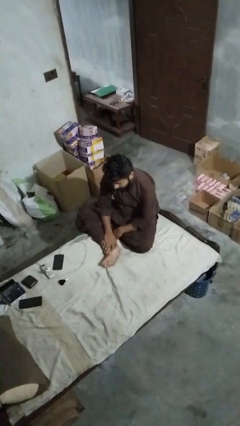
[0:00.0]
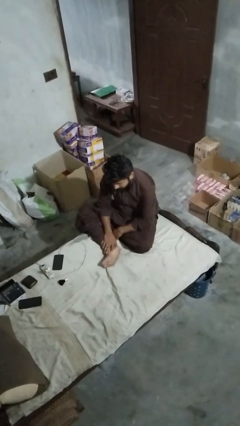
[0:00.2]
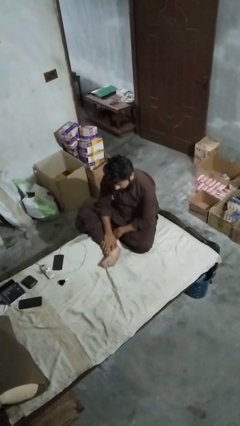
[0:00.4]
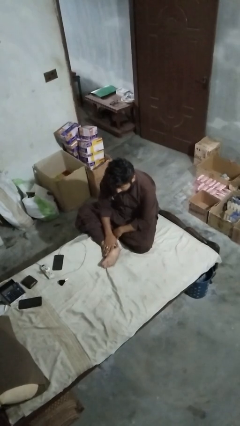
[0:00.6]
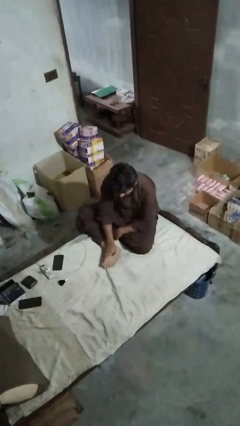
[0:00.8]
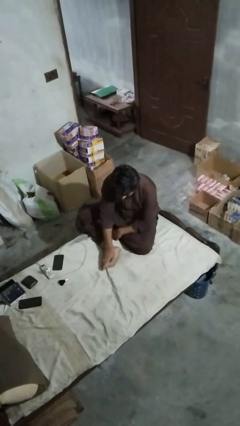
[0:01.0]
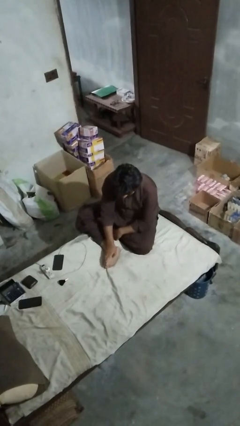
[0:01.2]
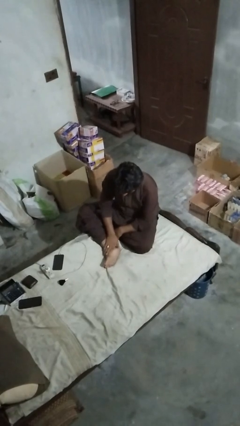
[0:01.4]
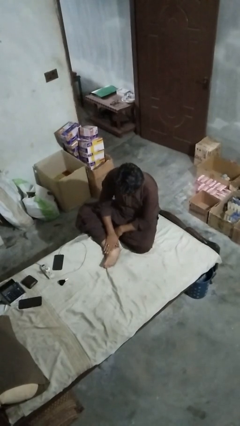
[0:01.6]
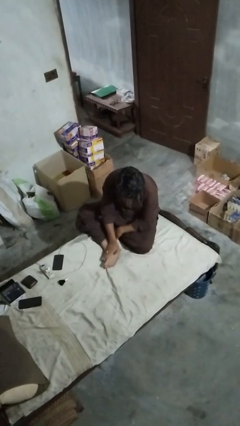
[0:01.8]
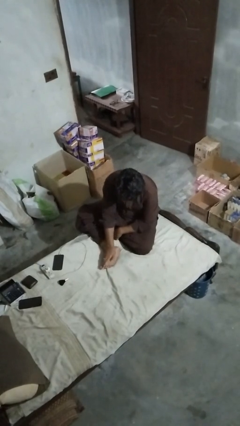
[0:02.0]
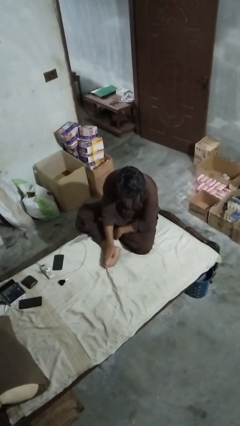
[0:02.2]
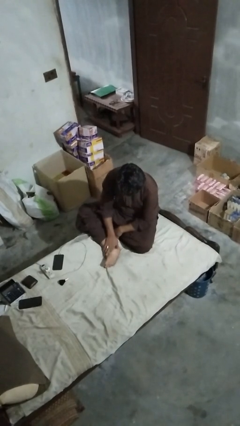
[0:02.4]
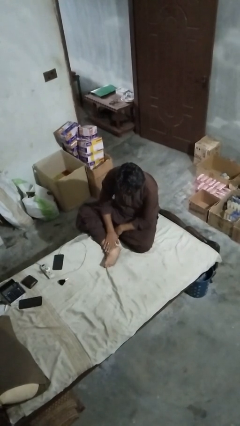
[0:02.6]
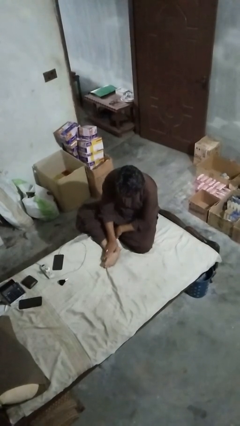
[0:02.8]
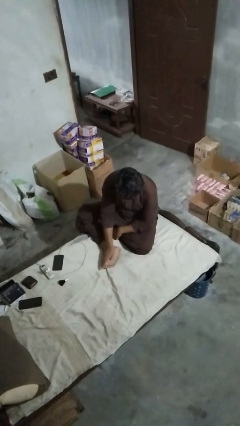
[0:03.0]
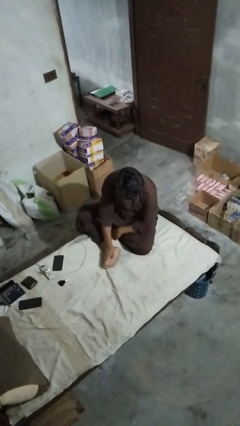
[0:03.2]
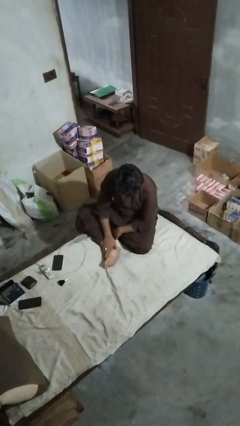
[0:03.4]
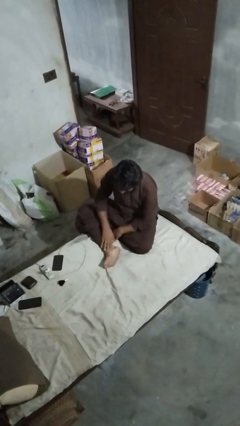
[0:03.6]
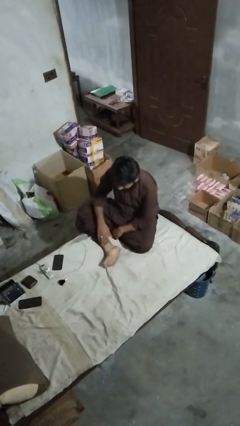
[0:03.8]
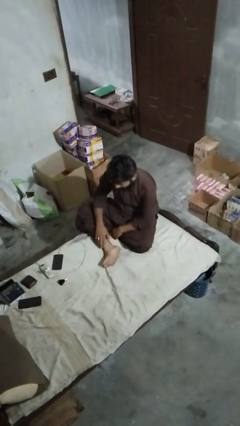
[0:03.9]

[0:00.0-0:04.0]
person rubs foot

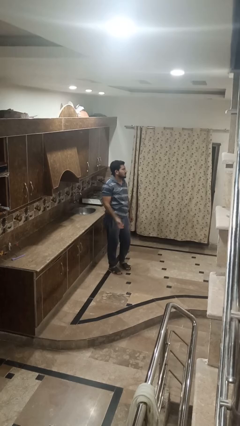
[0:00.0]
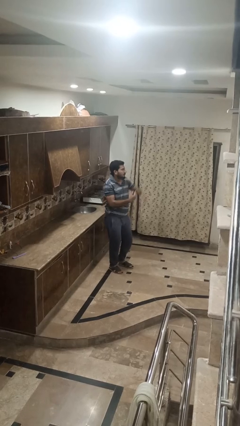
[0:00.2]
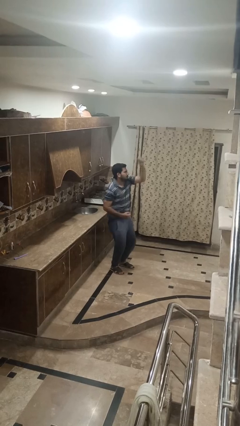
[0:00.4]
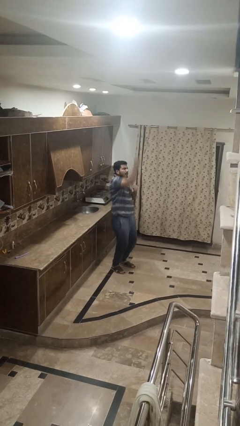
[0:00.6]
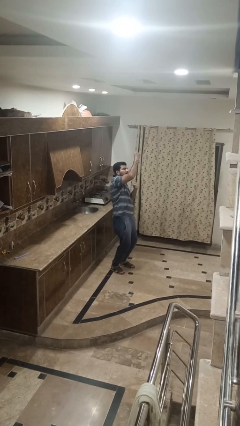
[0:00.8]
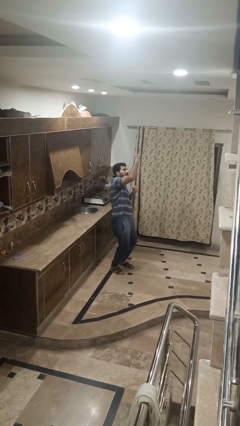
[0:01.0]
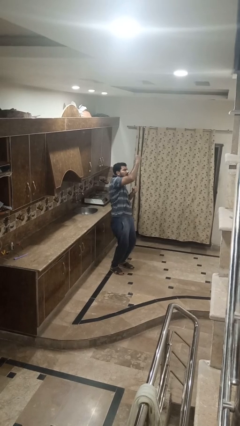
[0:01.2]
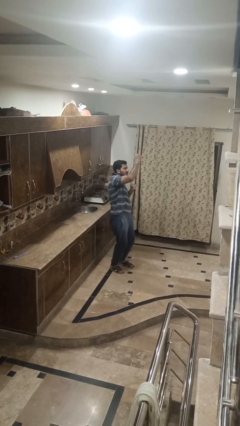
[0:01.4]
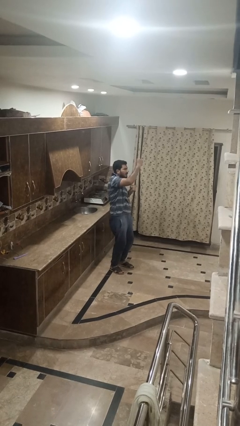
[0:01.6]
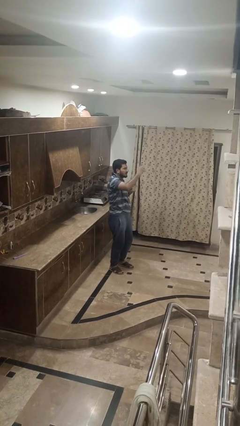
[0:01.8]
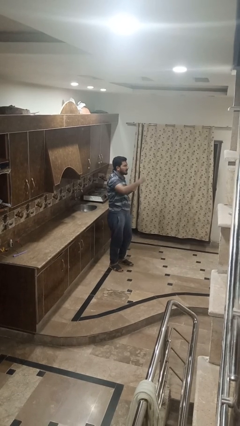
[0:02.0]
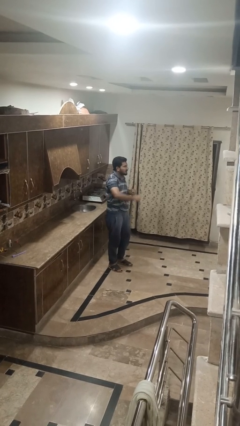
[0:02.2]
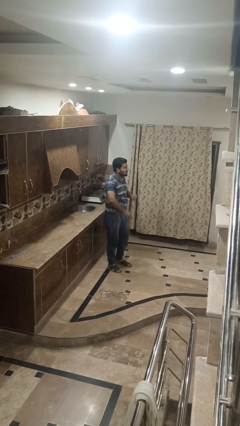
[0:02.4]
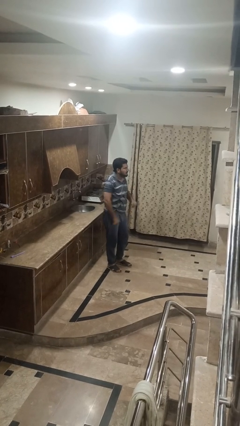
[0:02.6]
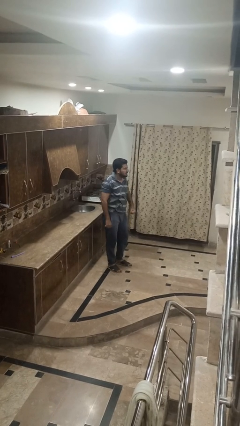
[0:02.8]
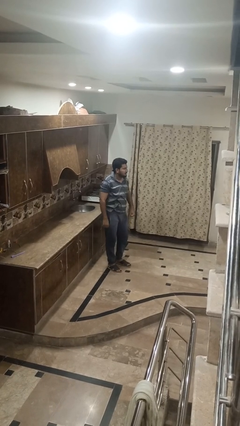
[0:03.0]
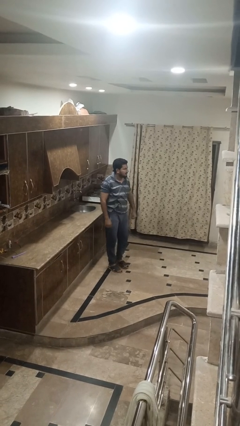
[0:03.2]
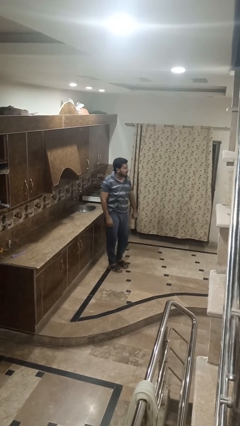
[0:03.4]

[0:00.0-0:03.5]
person punches

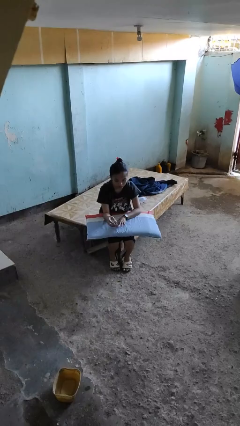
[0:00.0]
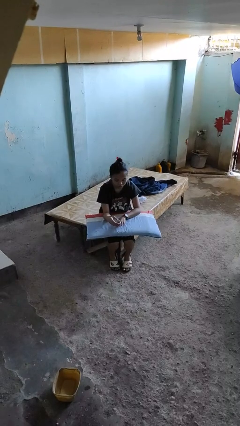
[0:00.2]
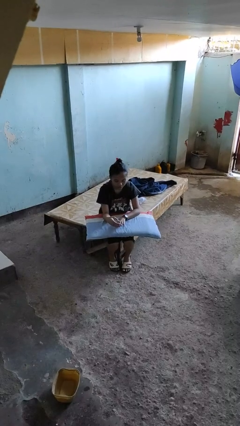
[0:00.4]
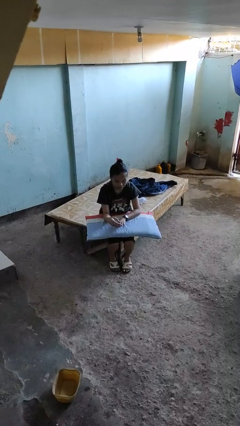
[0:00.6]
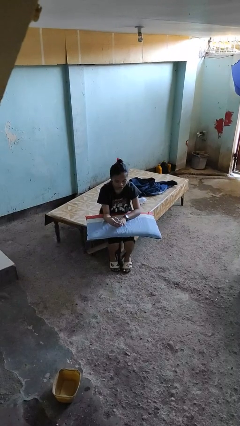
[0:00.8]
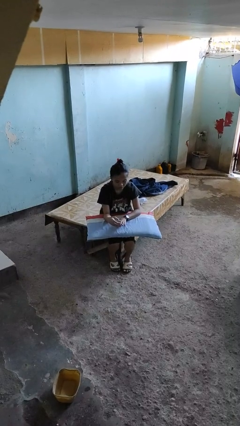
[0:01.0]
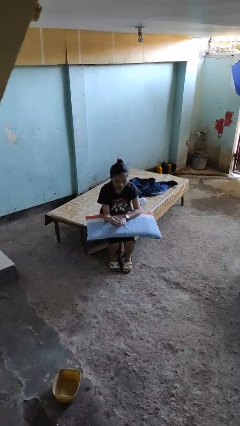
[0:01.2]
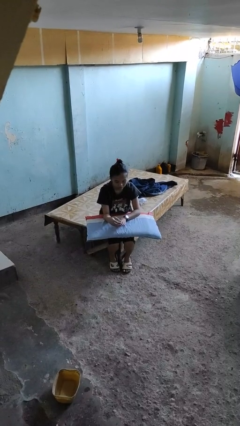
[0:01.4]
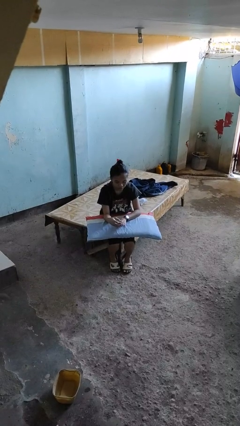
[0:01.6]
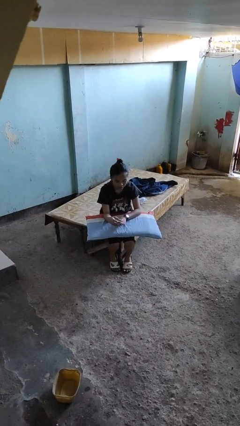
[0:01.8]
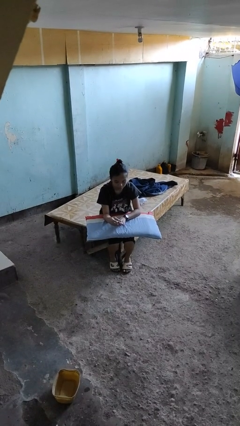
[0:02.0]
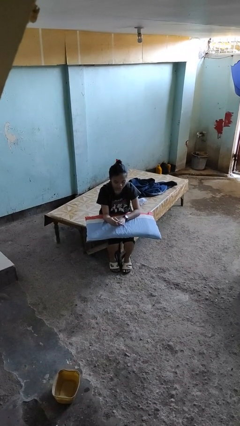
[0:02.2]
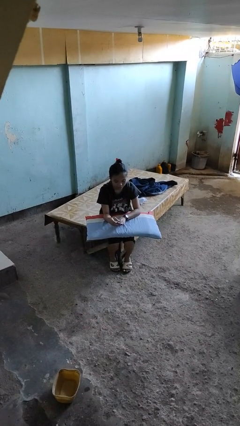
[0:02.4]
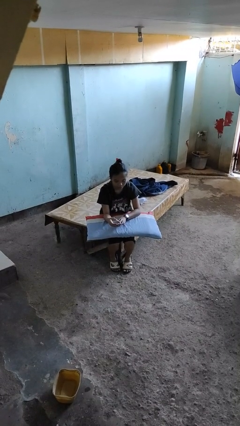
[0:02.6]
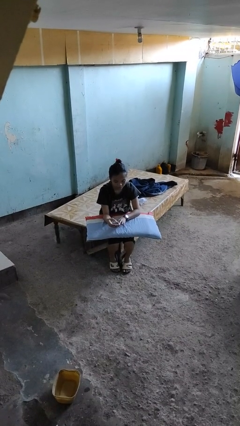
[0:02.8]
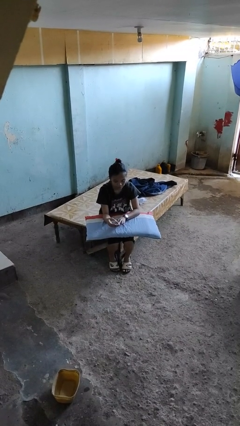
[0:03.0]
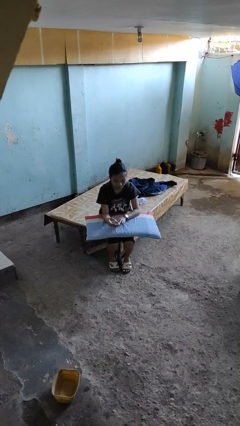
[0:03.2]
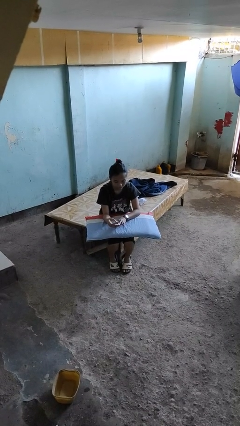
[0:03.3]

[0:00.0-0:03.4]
person clips fingernails

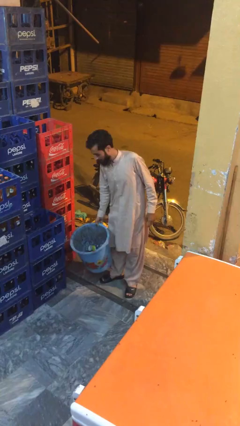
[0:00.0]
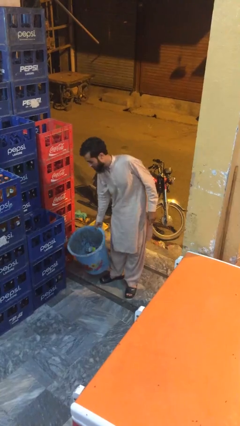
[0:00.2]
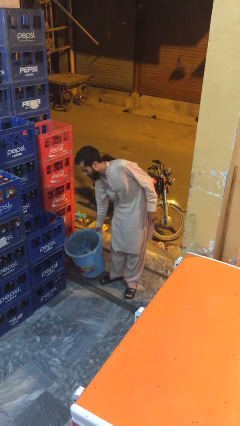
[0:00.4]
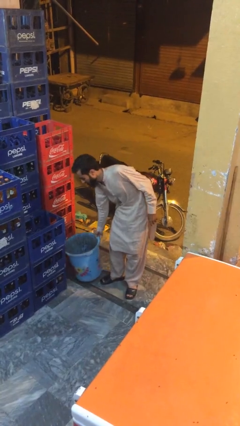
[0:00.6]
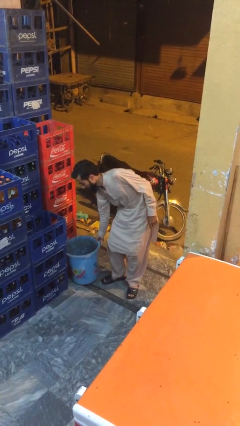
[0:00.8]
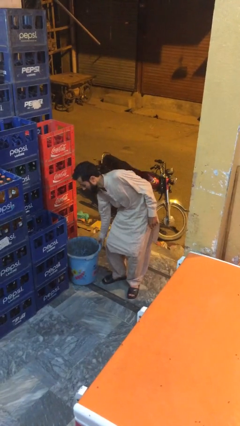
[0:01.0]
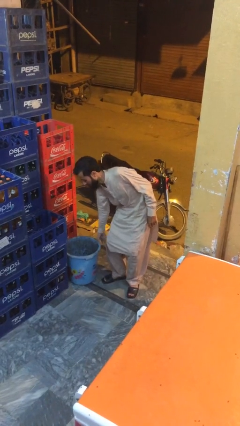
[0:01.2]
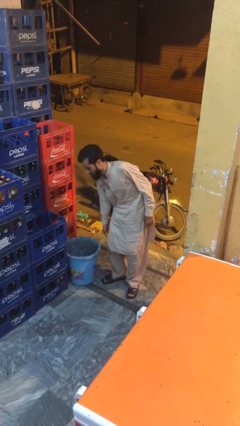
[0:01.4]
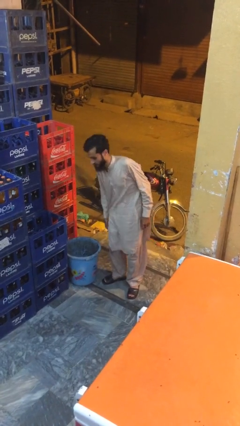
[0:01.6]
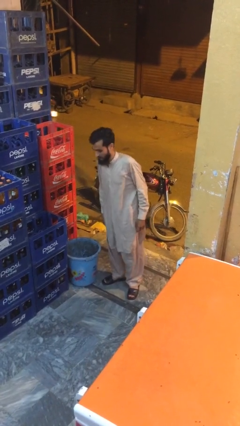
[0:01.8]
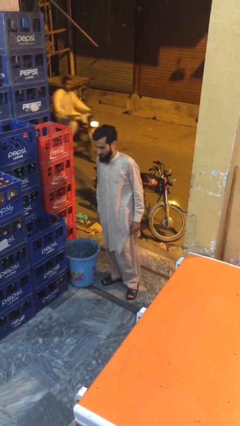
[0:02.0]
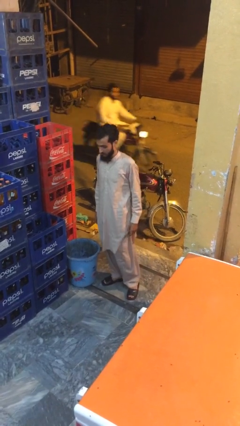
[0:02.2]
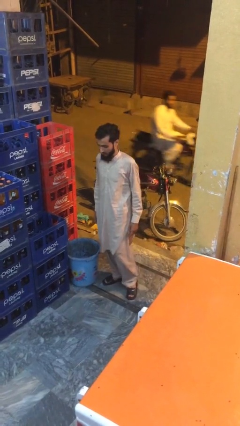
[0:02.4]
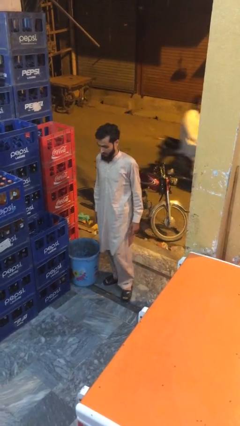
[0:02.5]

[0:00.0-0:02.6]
person puts down object on floor

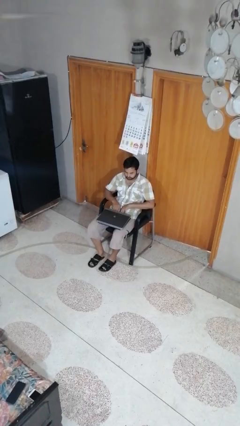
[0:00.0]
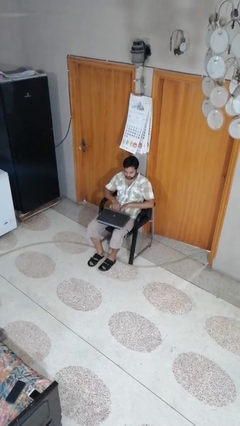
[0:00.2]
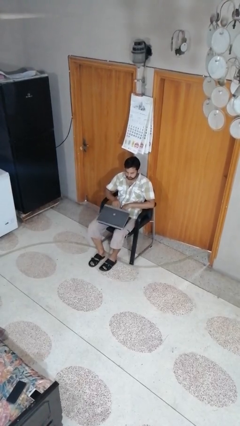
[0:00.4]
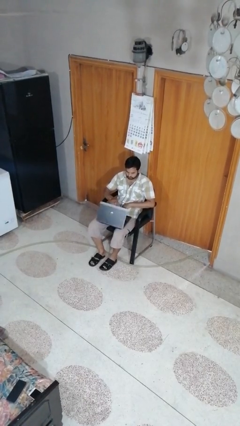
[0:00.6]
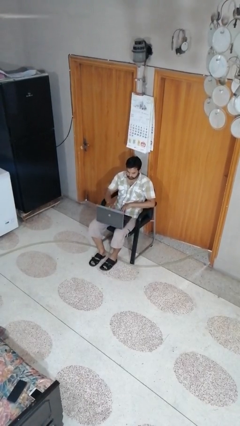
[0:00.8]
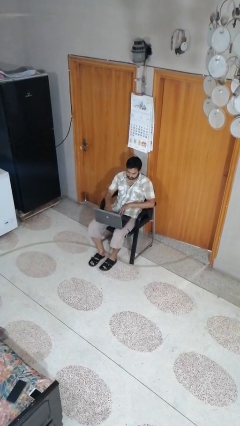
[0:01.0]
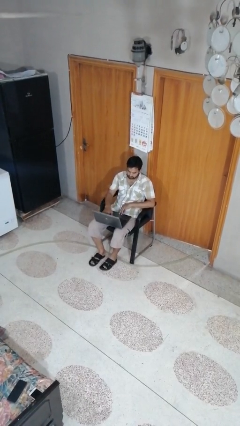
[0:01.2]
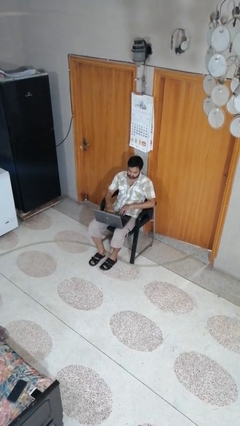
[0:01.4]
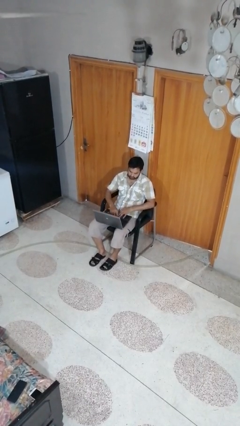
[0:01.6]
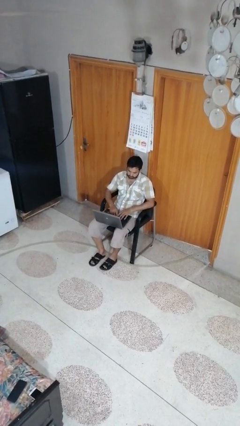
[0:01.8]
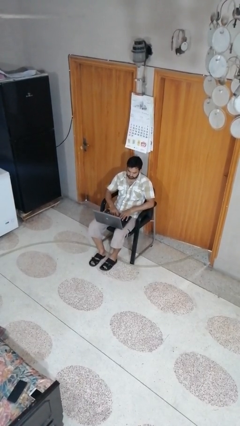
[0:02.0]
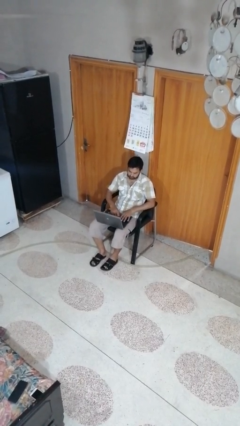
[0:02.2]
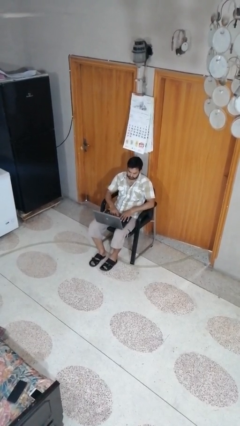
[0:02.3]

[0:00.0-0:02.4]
person opens laptop

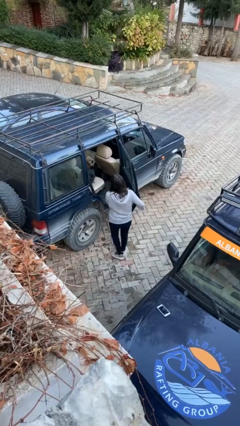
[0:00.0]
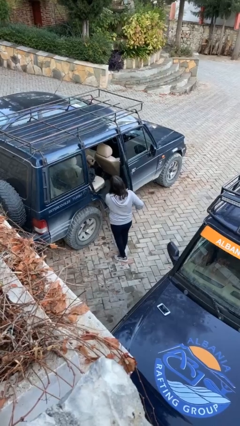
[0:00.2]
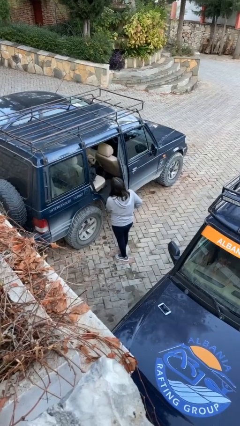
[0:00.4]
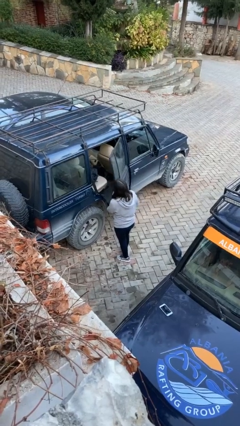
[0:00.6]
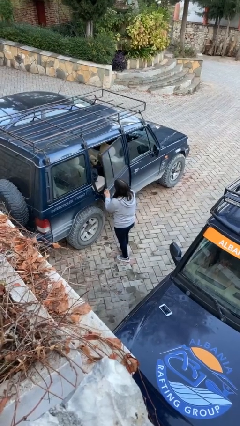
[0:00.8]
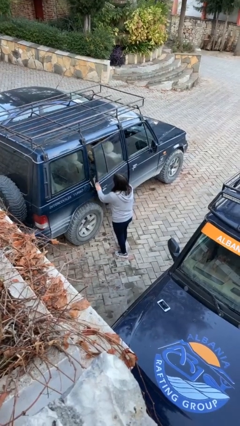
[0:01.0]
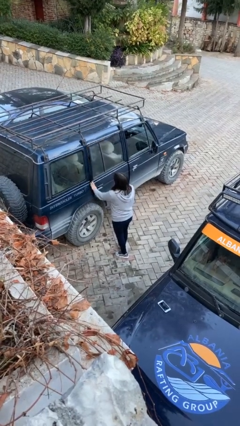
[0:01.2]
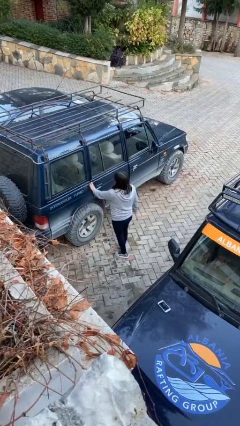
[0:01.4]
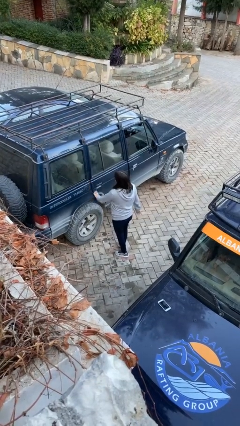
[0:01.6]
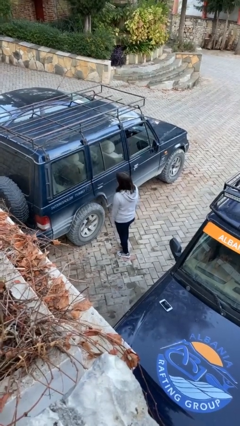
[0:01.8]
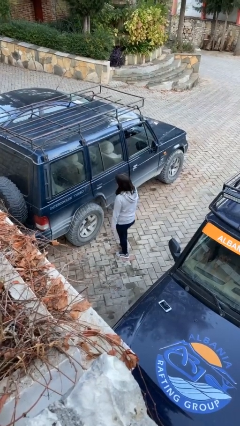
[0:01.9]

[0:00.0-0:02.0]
person closes car door
